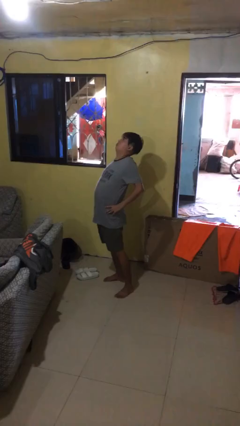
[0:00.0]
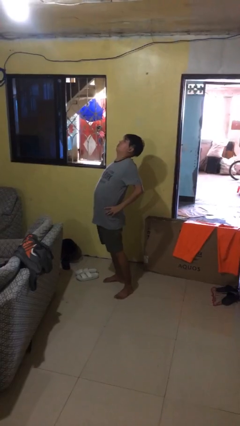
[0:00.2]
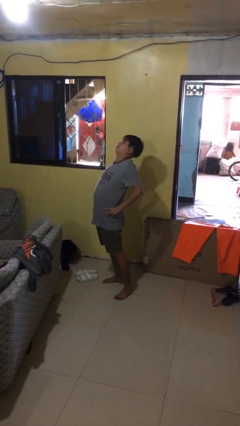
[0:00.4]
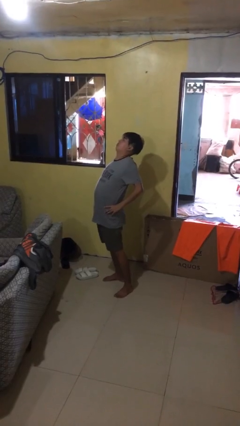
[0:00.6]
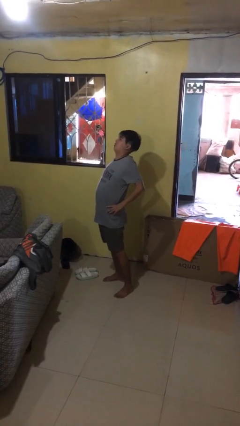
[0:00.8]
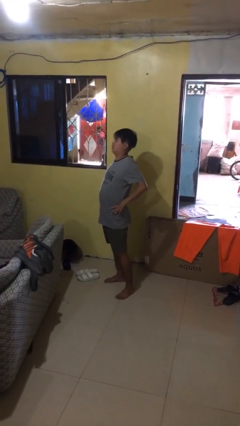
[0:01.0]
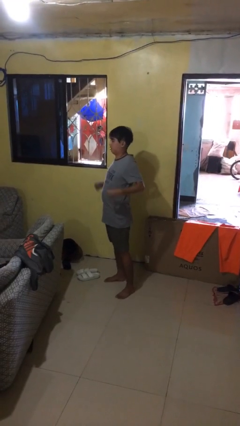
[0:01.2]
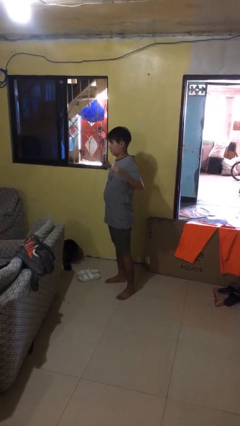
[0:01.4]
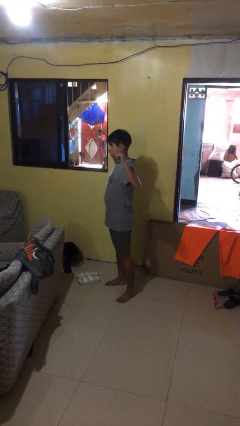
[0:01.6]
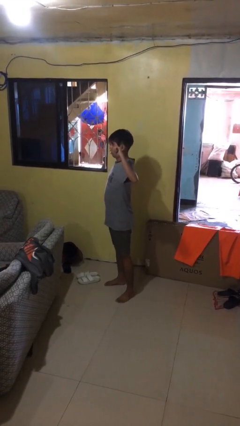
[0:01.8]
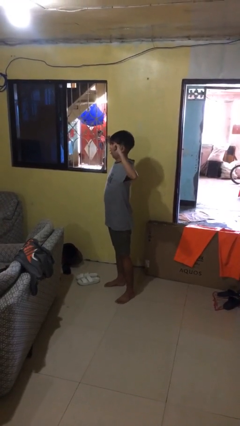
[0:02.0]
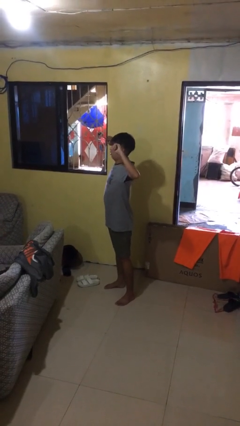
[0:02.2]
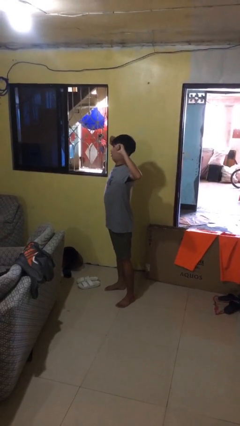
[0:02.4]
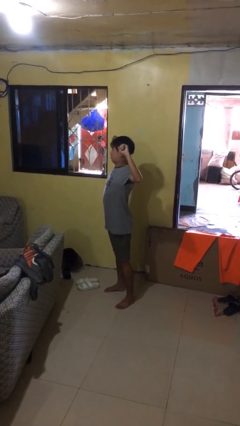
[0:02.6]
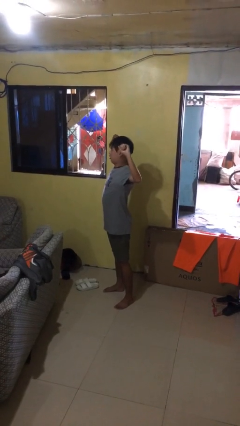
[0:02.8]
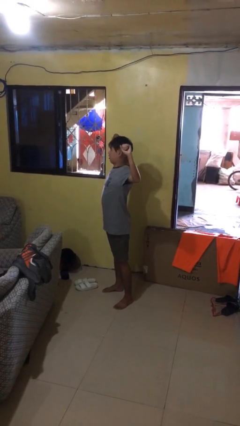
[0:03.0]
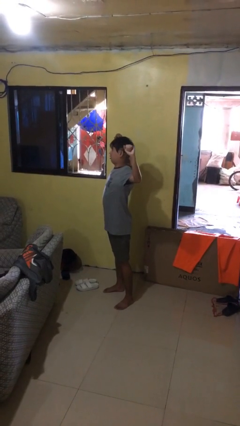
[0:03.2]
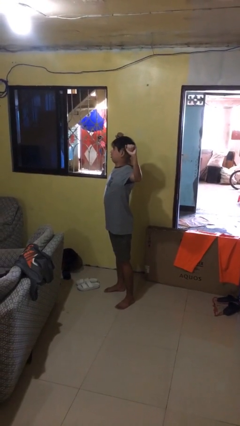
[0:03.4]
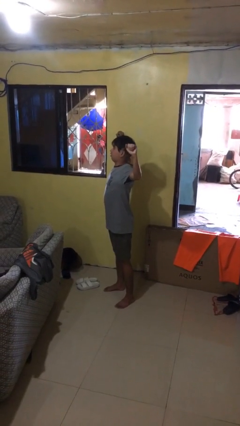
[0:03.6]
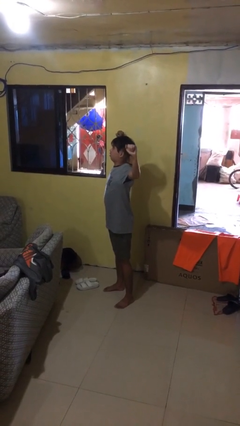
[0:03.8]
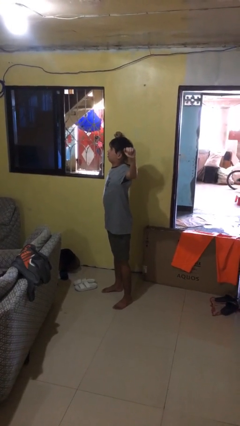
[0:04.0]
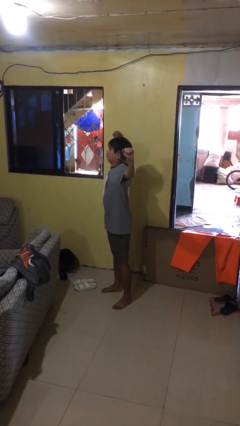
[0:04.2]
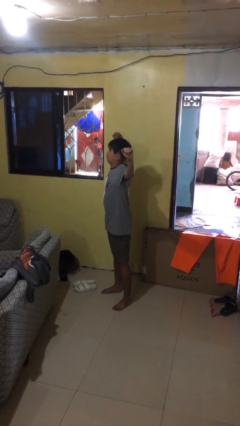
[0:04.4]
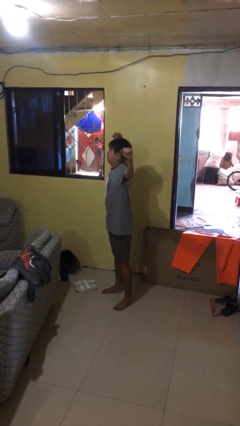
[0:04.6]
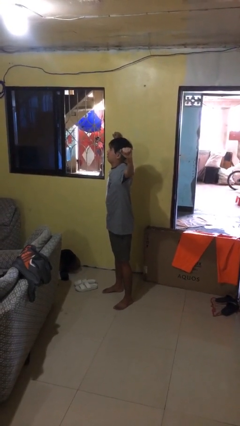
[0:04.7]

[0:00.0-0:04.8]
person stretches arms to side

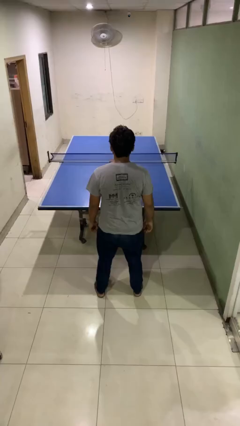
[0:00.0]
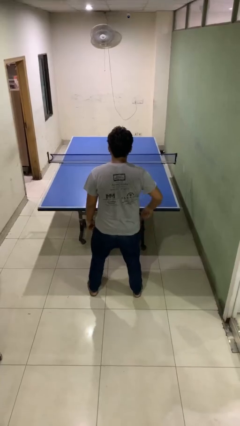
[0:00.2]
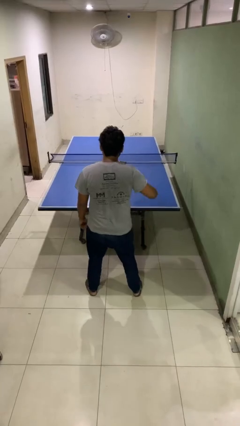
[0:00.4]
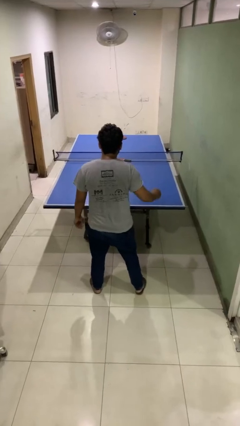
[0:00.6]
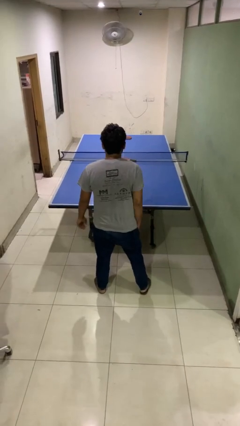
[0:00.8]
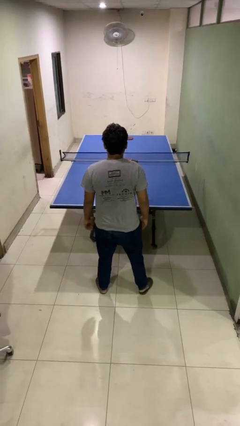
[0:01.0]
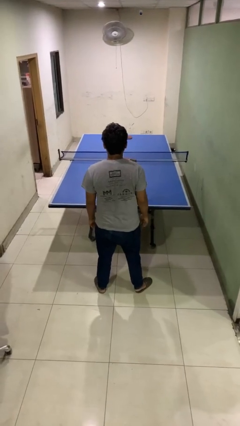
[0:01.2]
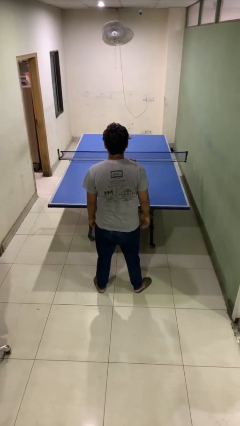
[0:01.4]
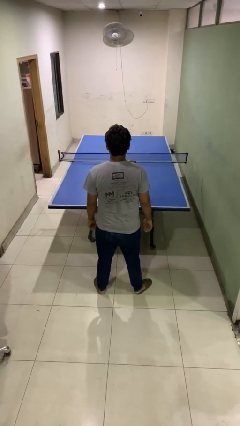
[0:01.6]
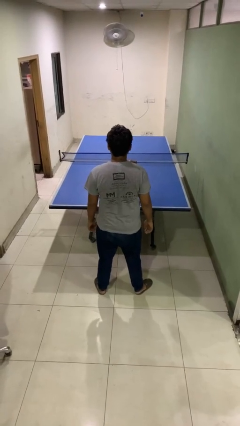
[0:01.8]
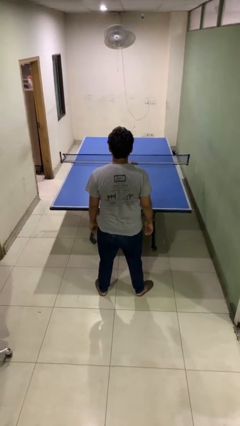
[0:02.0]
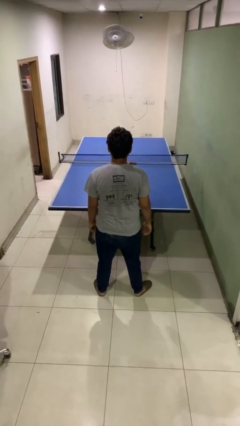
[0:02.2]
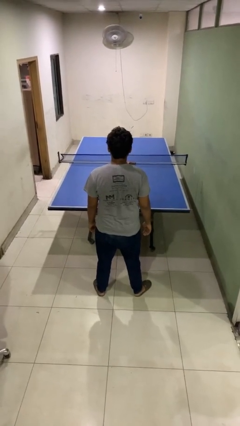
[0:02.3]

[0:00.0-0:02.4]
person slaps hands on thighs

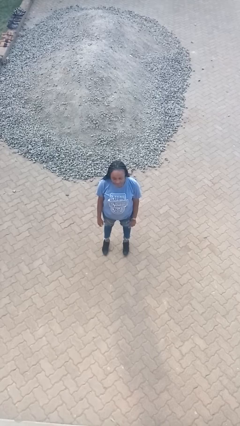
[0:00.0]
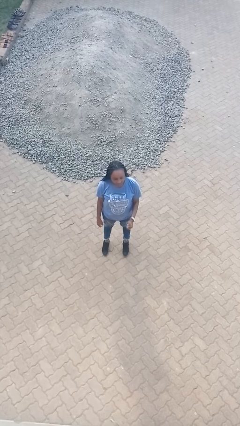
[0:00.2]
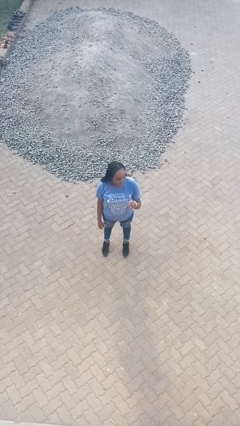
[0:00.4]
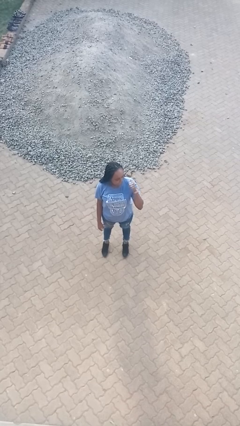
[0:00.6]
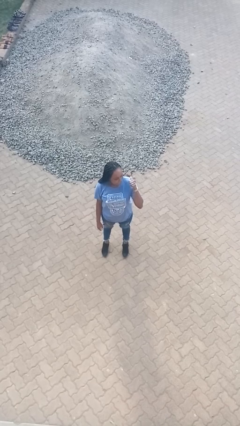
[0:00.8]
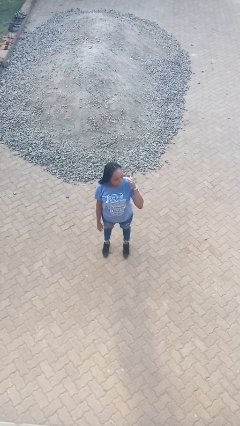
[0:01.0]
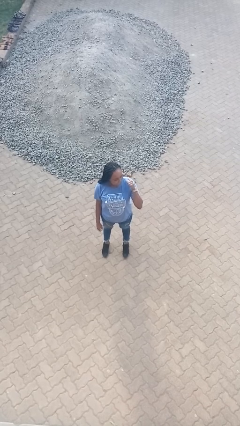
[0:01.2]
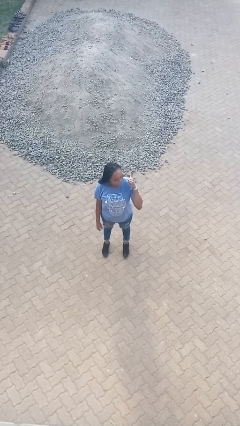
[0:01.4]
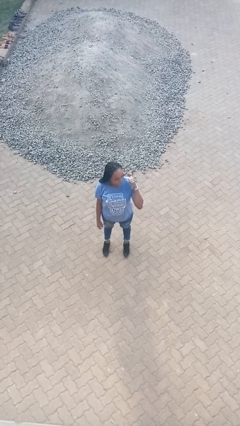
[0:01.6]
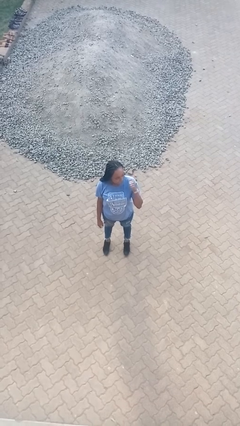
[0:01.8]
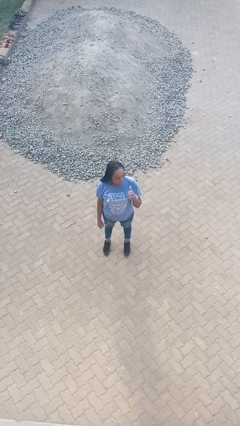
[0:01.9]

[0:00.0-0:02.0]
person gestures behind me

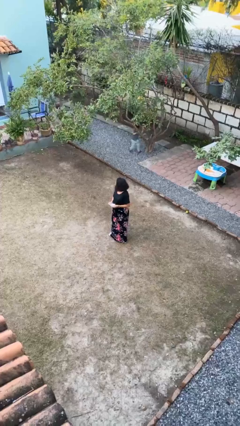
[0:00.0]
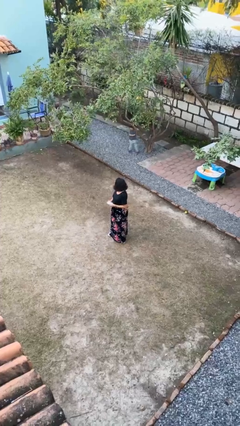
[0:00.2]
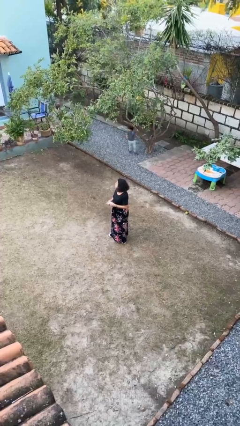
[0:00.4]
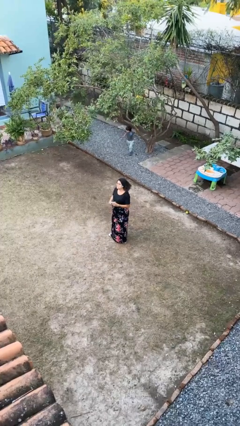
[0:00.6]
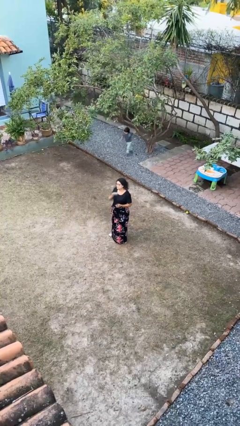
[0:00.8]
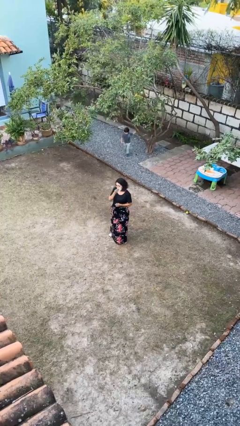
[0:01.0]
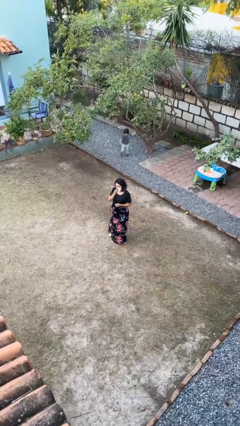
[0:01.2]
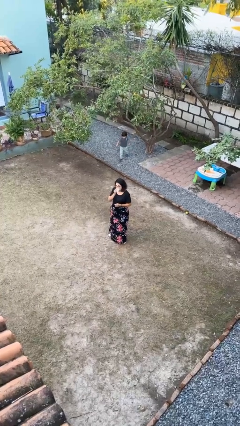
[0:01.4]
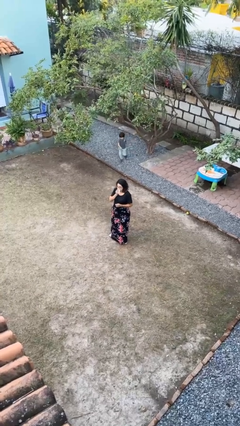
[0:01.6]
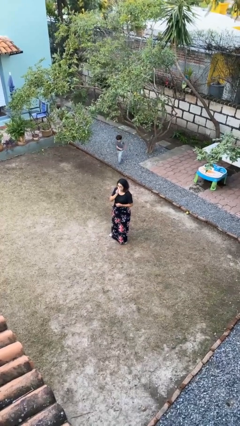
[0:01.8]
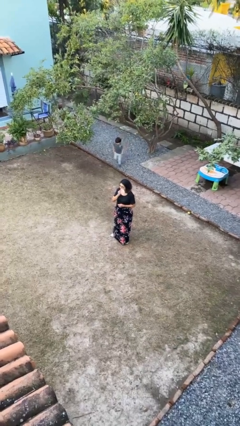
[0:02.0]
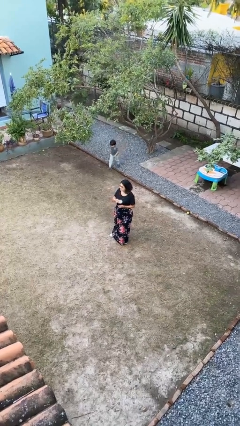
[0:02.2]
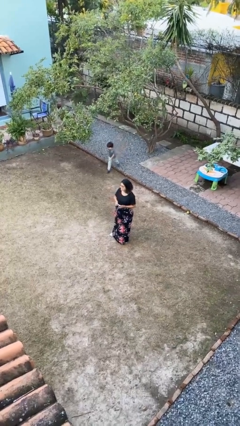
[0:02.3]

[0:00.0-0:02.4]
person wipes mouth with napkin

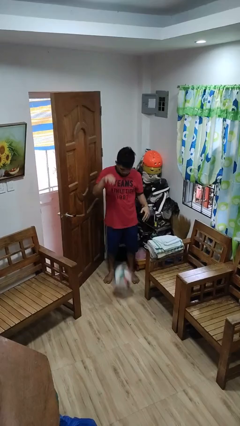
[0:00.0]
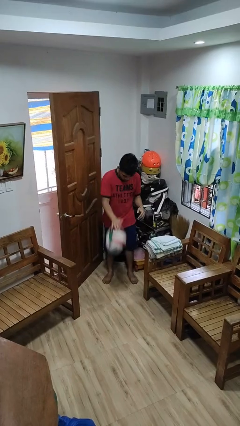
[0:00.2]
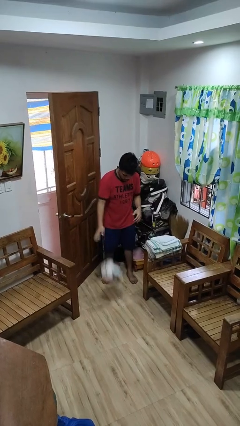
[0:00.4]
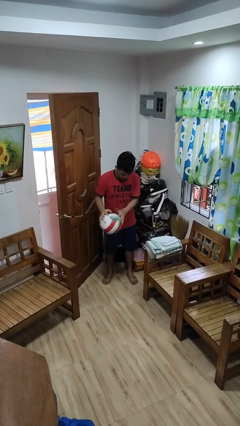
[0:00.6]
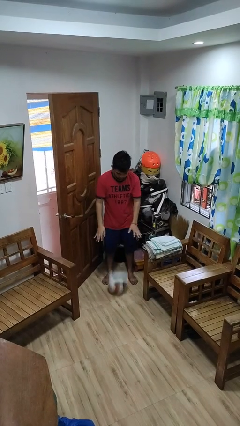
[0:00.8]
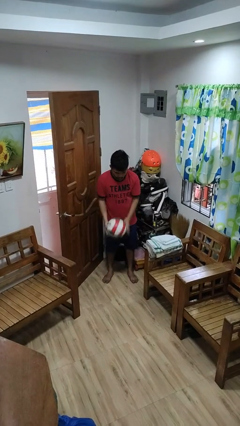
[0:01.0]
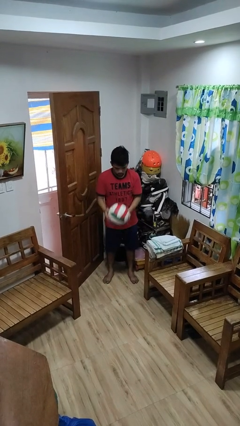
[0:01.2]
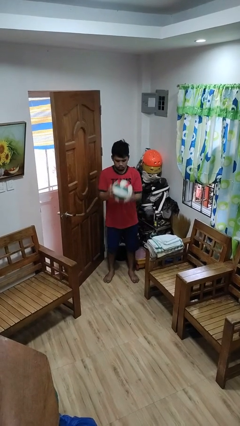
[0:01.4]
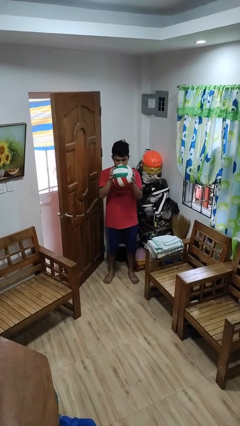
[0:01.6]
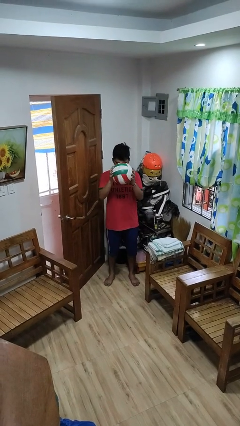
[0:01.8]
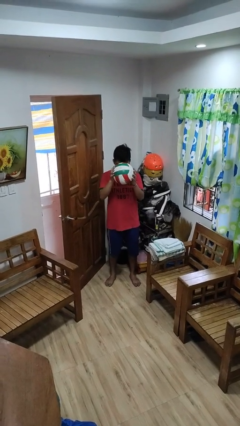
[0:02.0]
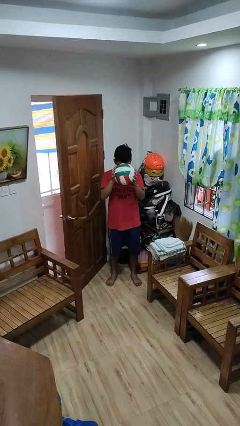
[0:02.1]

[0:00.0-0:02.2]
person bounces ball on floor

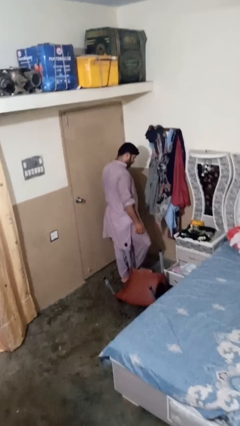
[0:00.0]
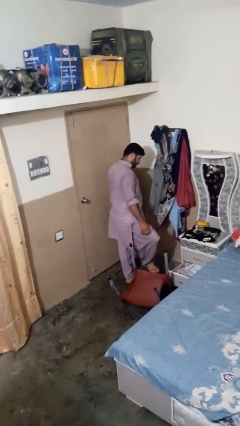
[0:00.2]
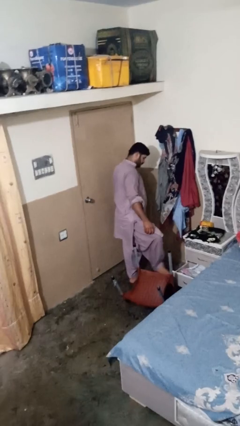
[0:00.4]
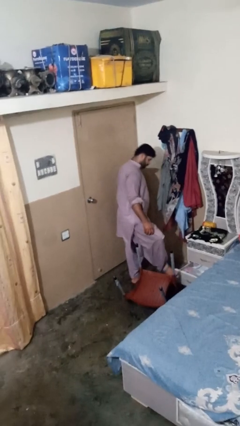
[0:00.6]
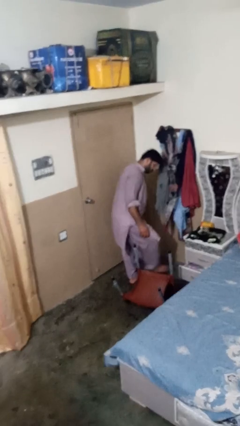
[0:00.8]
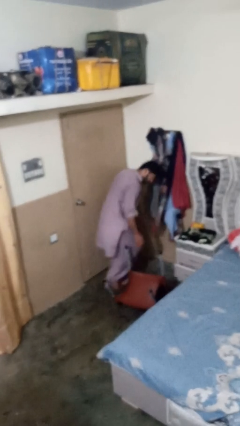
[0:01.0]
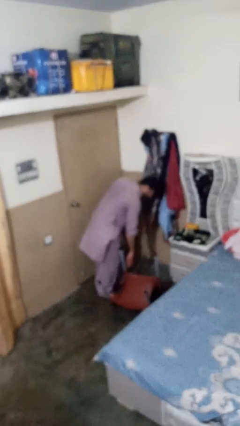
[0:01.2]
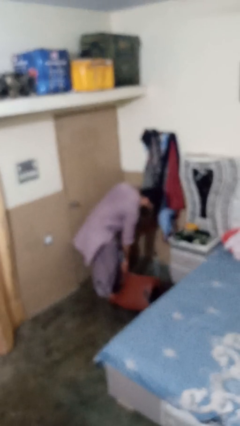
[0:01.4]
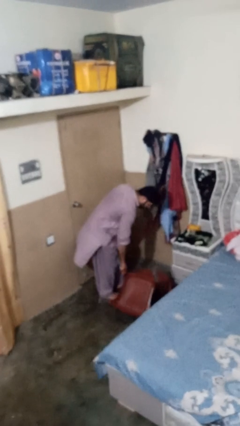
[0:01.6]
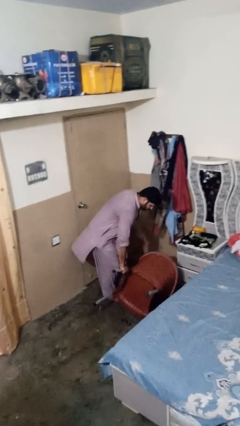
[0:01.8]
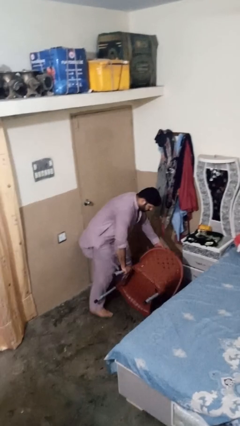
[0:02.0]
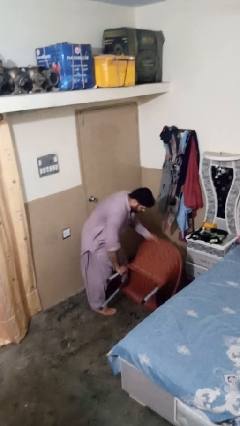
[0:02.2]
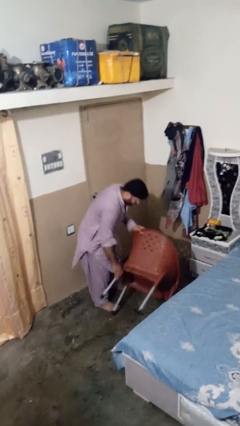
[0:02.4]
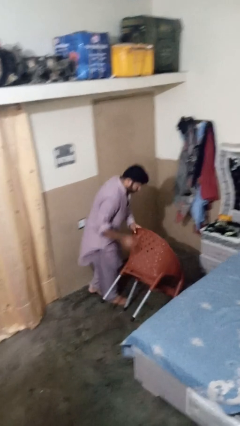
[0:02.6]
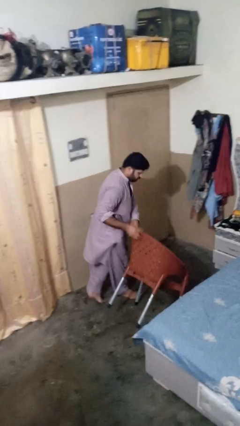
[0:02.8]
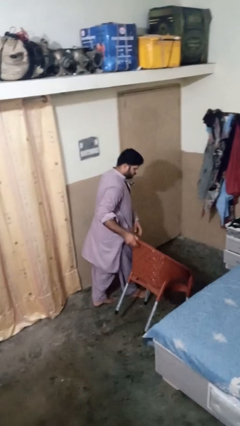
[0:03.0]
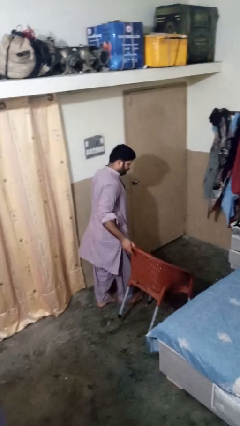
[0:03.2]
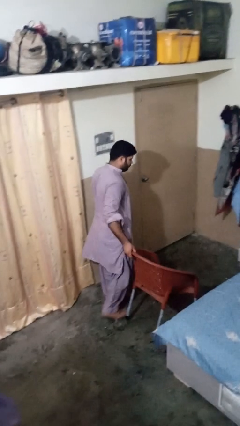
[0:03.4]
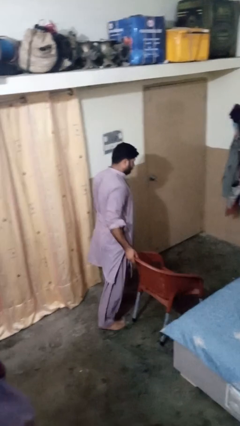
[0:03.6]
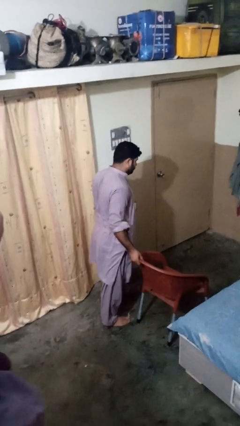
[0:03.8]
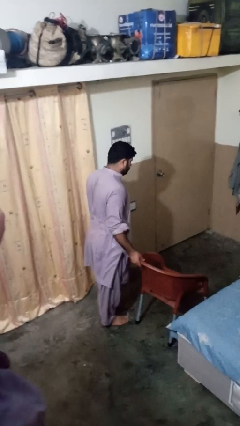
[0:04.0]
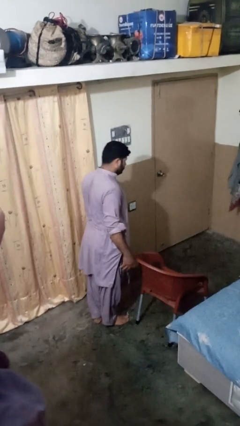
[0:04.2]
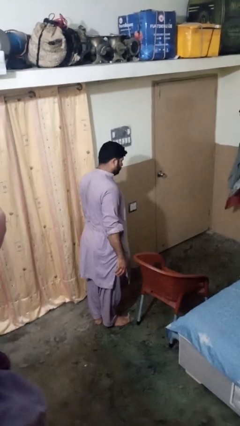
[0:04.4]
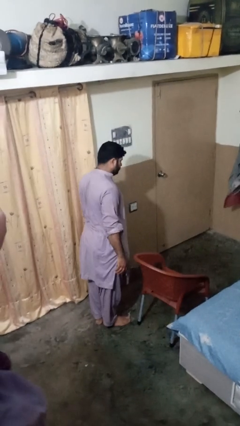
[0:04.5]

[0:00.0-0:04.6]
person sets upright furniture
